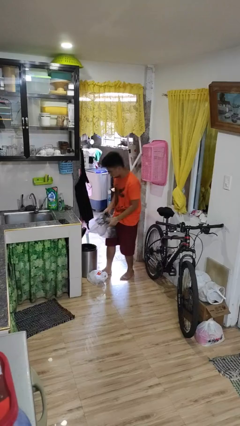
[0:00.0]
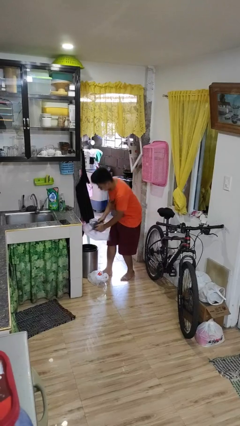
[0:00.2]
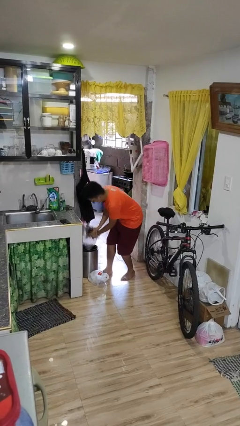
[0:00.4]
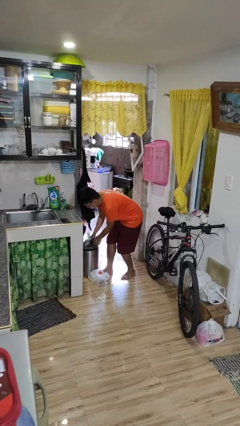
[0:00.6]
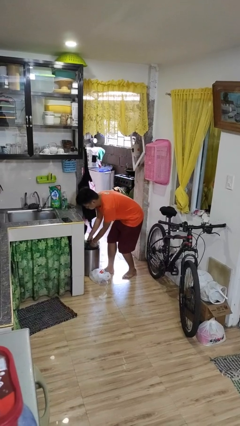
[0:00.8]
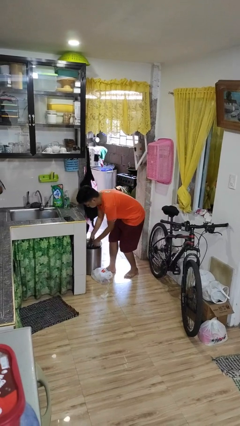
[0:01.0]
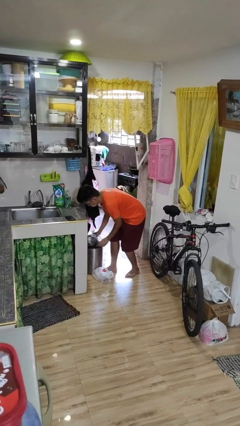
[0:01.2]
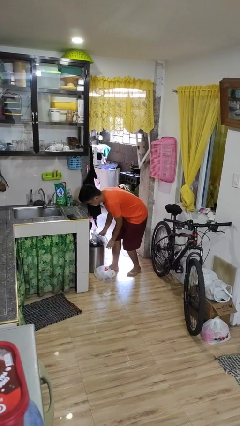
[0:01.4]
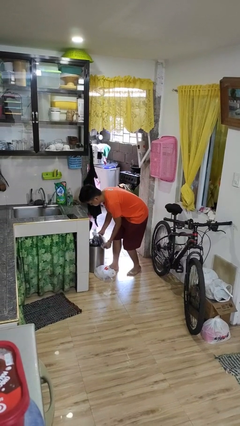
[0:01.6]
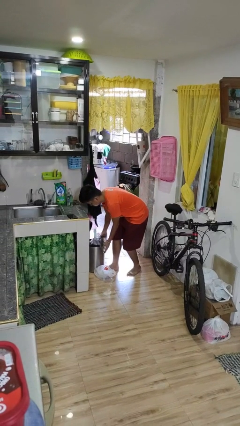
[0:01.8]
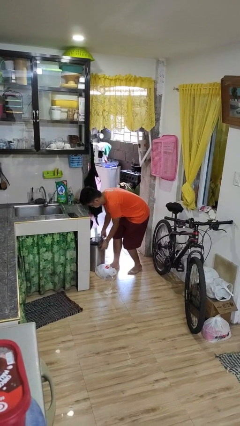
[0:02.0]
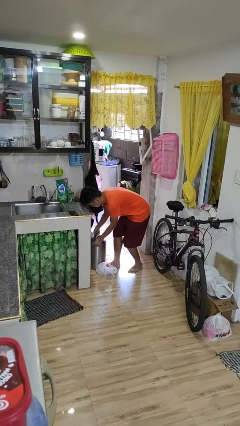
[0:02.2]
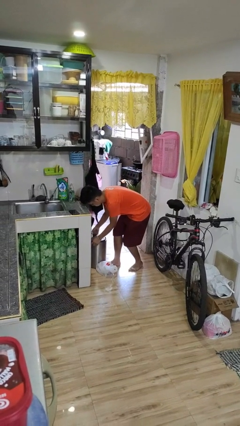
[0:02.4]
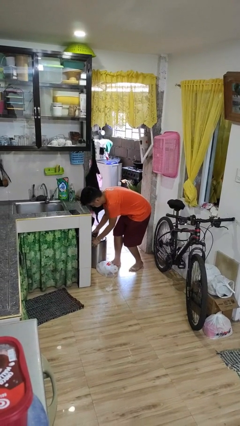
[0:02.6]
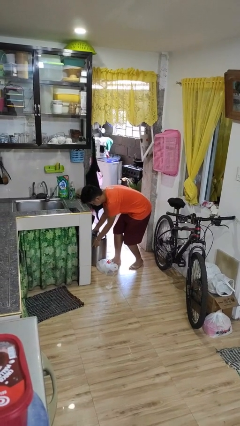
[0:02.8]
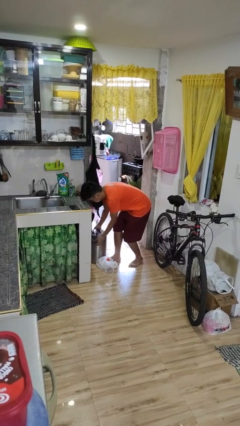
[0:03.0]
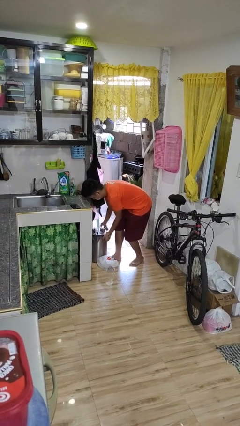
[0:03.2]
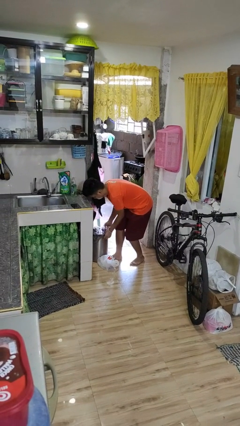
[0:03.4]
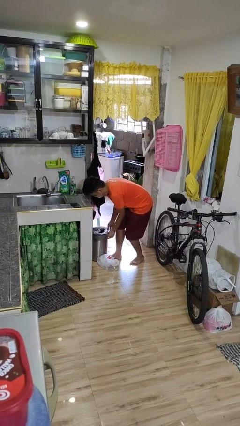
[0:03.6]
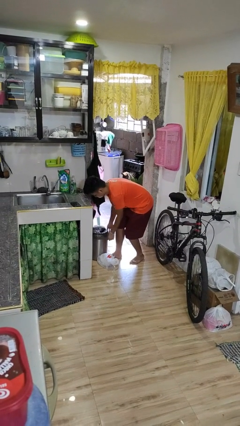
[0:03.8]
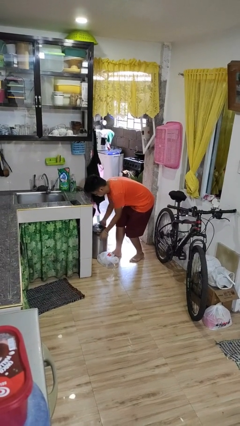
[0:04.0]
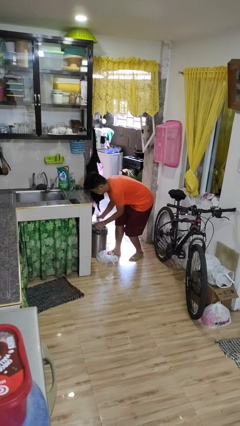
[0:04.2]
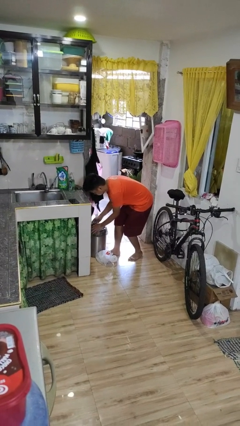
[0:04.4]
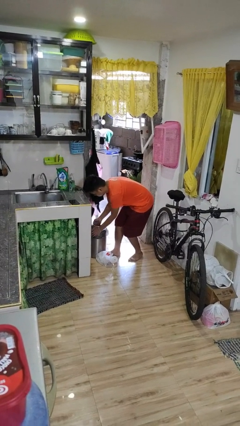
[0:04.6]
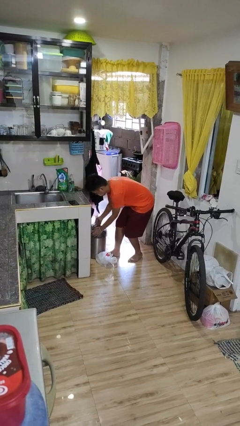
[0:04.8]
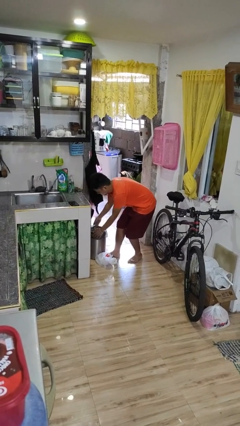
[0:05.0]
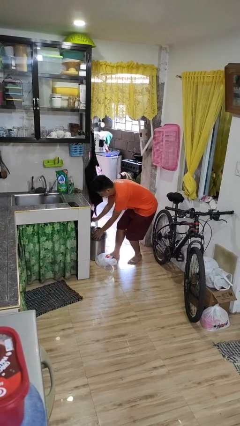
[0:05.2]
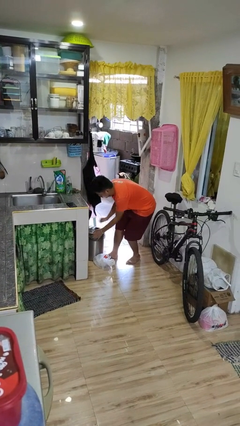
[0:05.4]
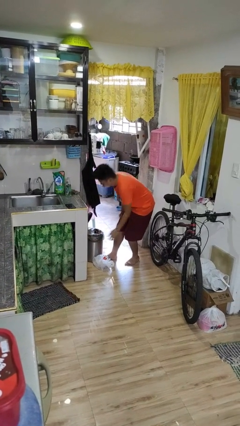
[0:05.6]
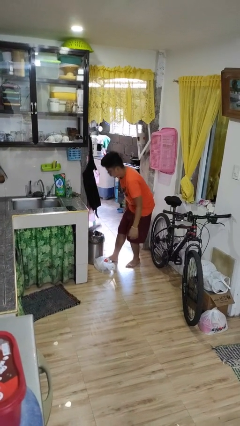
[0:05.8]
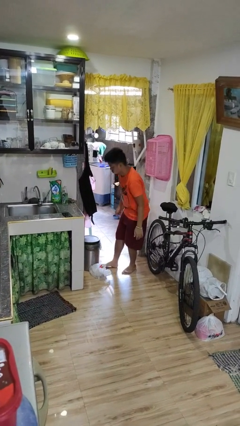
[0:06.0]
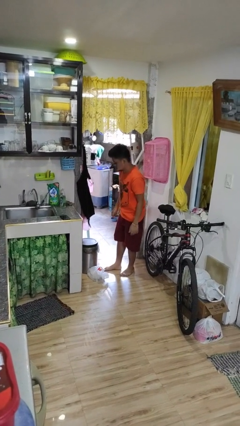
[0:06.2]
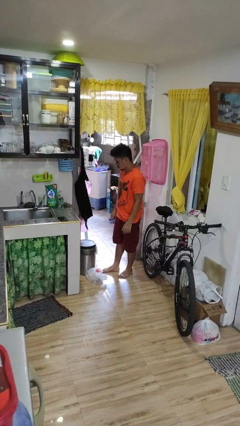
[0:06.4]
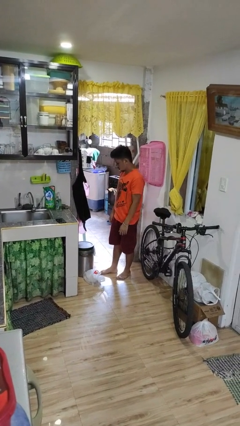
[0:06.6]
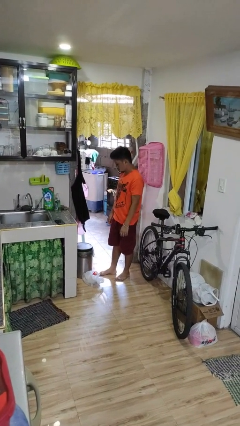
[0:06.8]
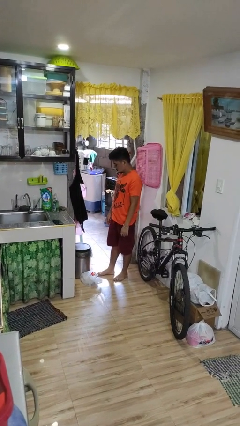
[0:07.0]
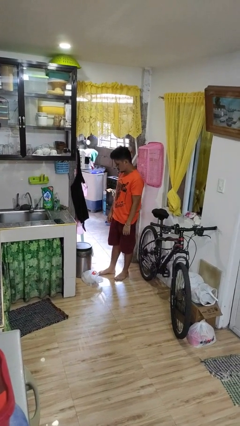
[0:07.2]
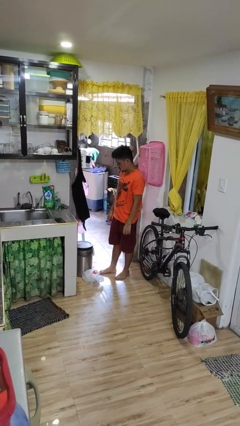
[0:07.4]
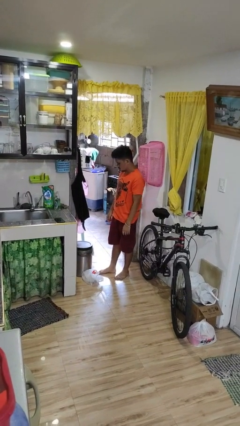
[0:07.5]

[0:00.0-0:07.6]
person inserts trashbag into trashcan

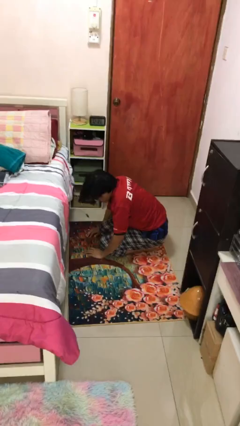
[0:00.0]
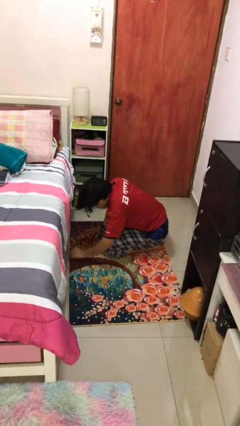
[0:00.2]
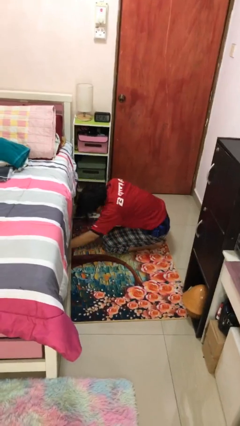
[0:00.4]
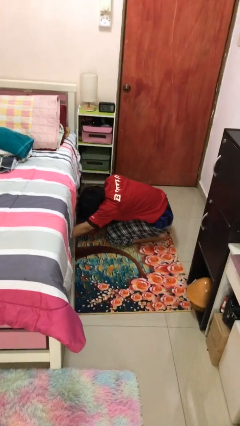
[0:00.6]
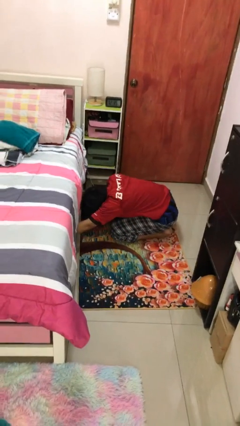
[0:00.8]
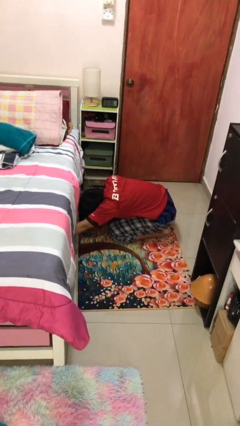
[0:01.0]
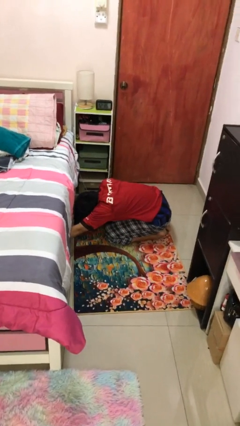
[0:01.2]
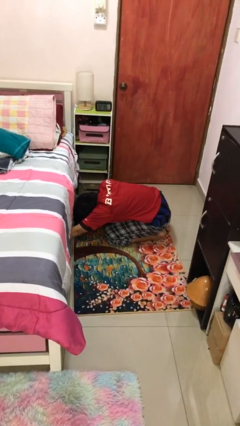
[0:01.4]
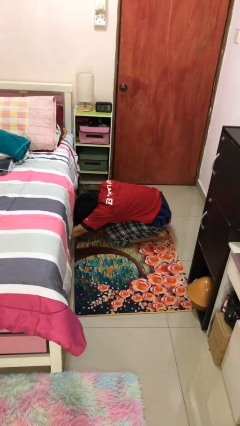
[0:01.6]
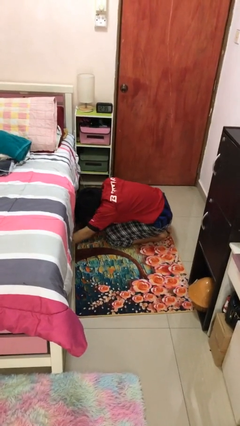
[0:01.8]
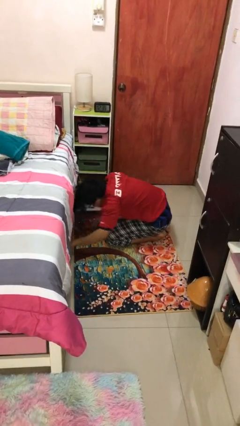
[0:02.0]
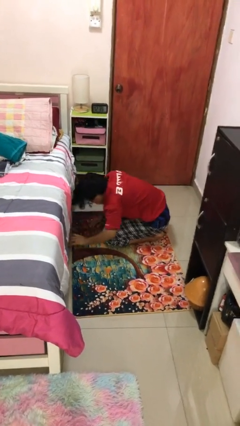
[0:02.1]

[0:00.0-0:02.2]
person searches under bed

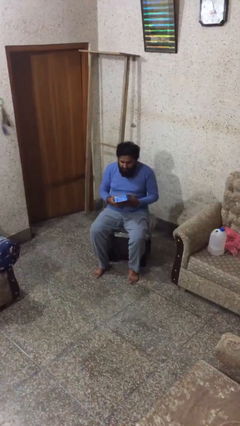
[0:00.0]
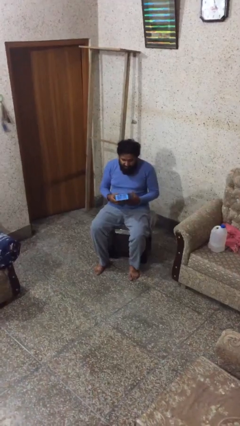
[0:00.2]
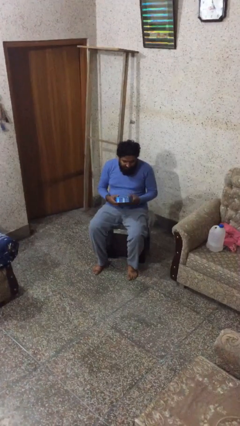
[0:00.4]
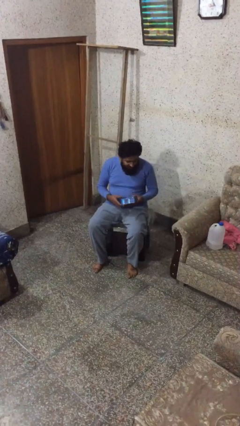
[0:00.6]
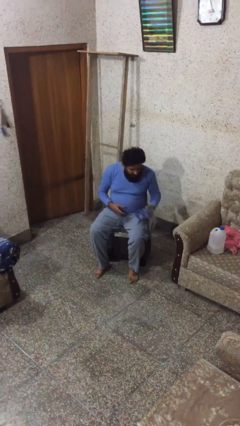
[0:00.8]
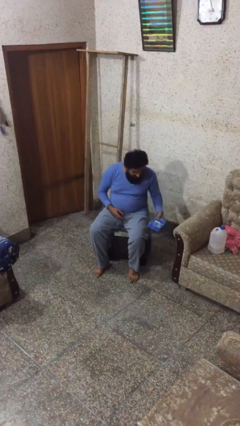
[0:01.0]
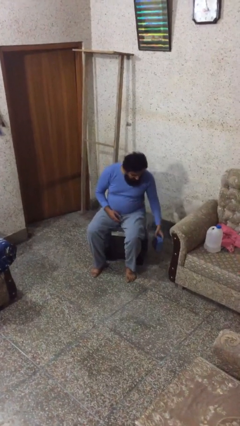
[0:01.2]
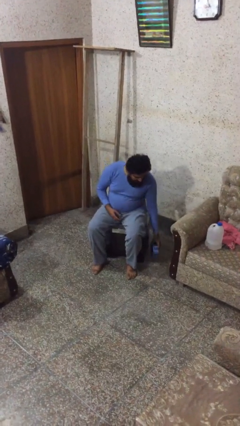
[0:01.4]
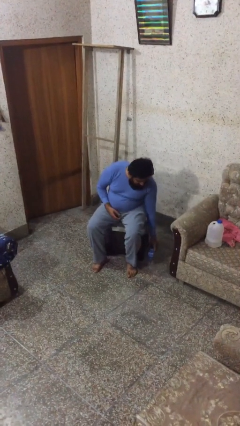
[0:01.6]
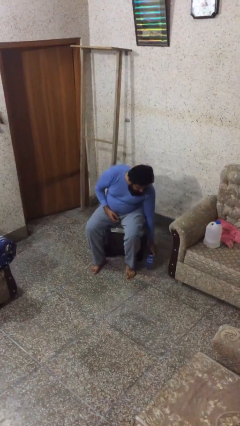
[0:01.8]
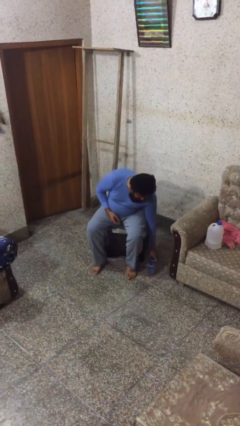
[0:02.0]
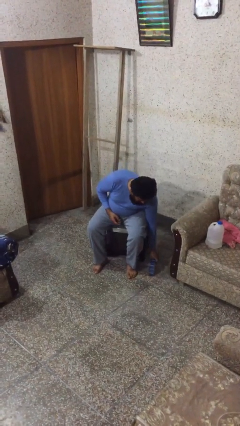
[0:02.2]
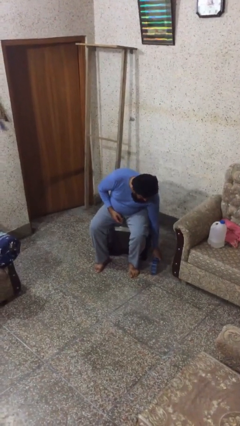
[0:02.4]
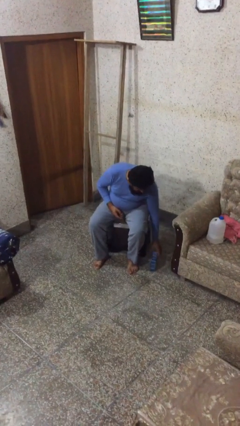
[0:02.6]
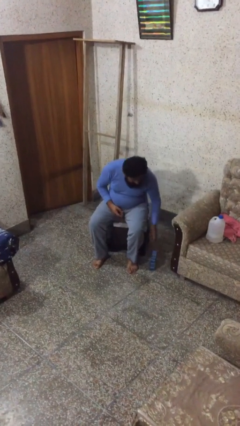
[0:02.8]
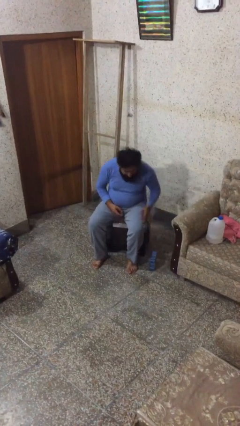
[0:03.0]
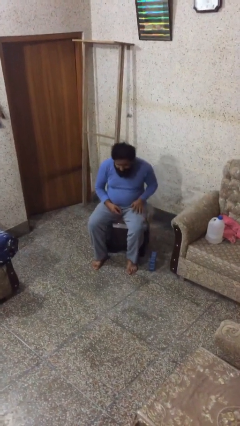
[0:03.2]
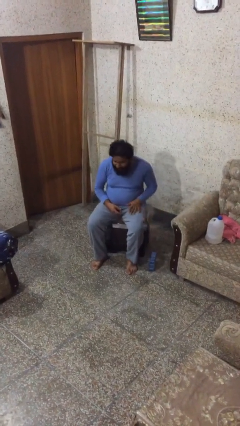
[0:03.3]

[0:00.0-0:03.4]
person puts down object on floor

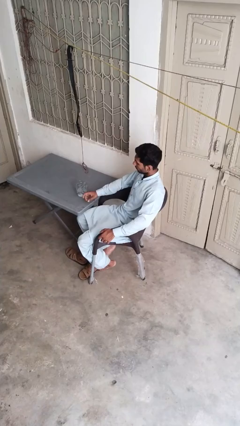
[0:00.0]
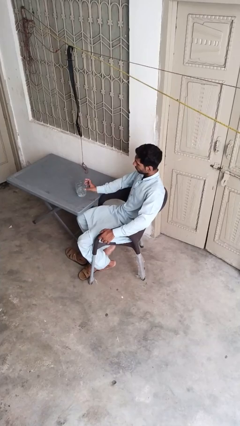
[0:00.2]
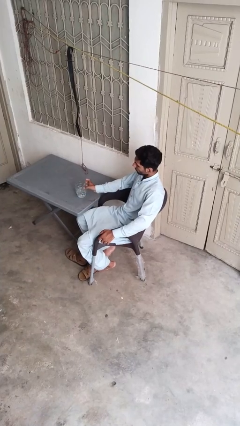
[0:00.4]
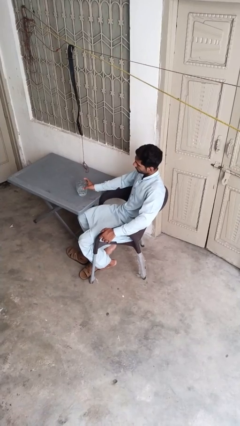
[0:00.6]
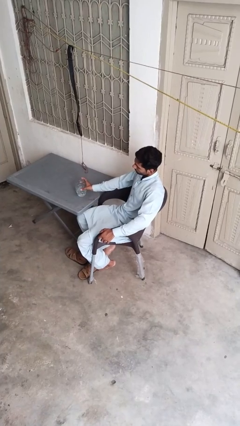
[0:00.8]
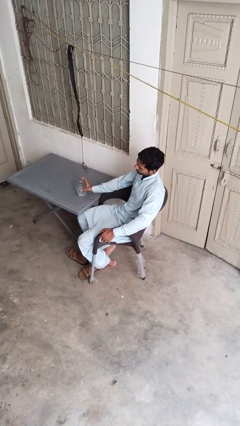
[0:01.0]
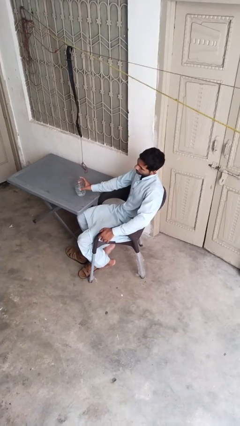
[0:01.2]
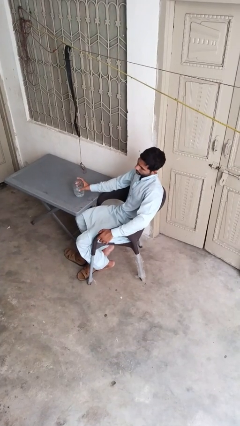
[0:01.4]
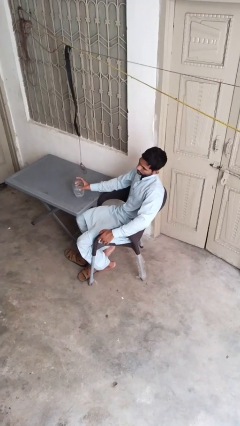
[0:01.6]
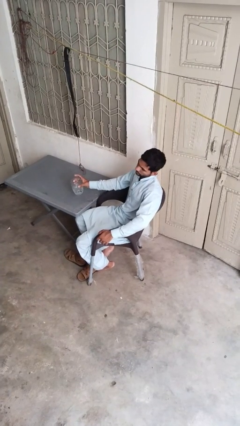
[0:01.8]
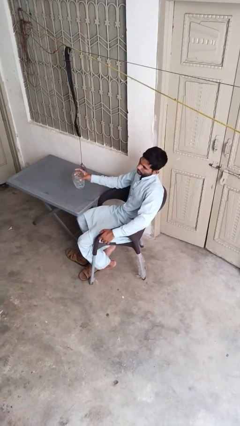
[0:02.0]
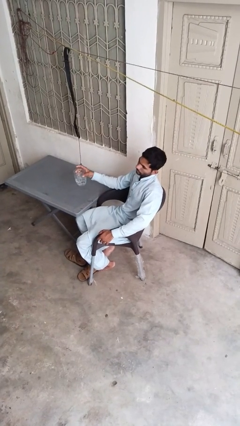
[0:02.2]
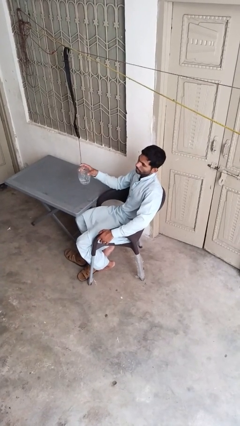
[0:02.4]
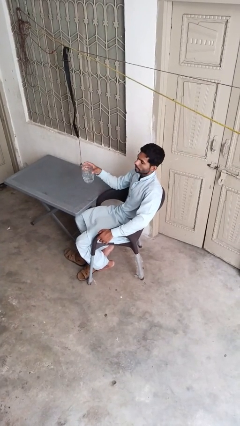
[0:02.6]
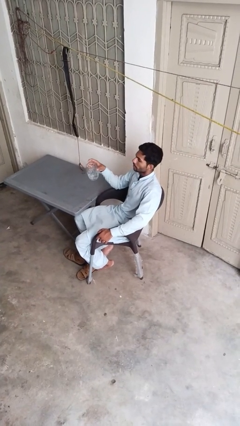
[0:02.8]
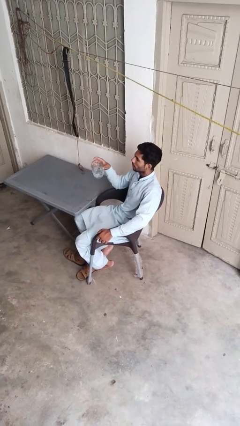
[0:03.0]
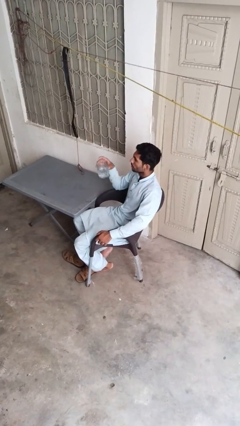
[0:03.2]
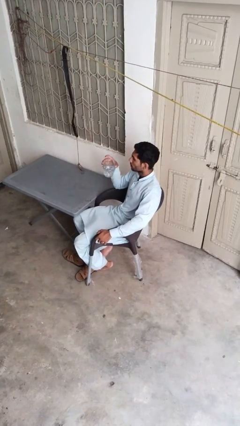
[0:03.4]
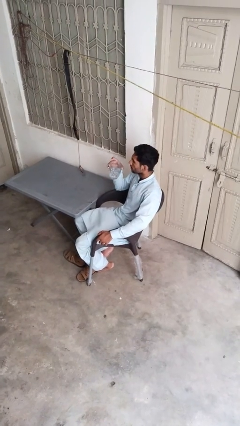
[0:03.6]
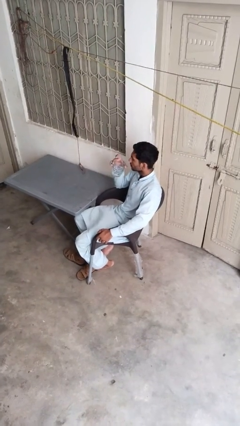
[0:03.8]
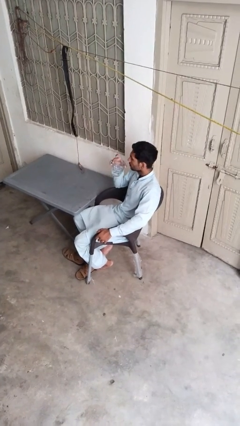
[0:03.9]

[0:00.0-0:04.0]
person picks up object from table

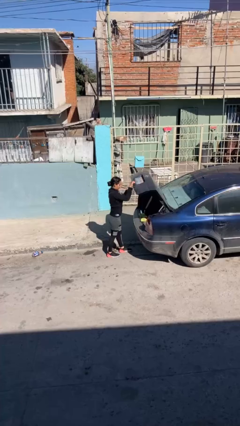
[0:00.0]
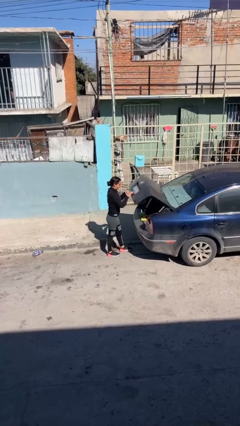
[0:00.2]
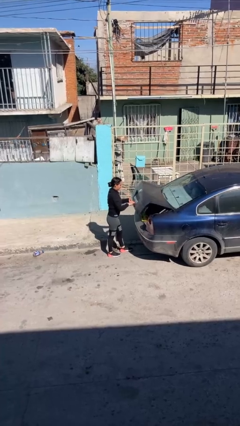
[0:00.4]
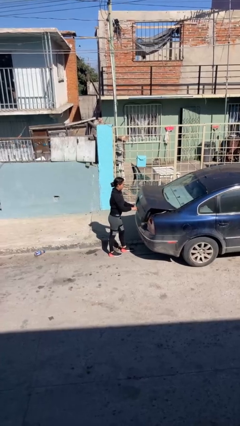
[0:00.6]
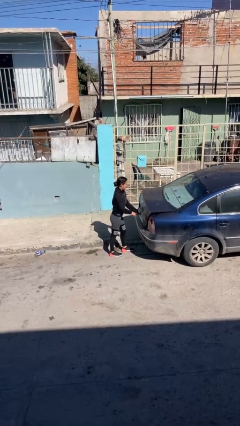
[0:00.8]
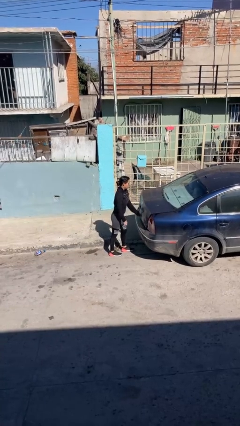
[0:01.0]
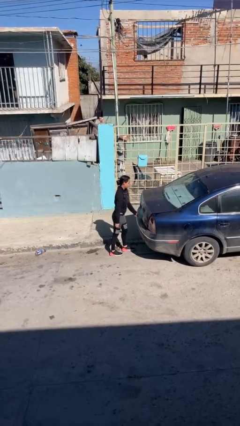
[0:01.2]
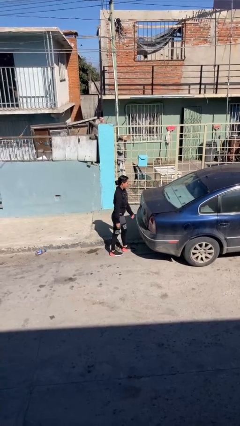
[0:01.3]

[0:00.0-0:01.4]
person closes car trunk
